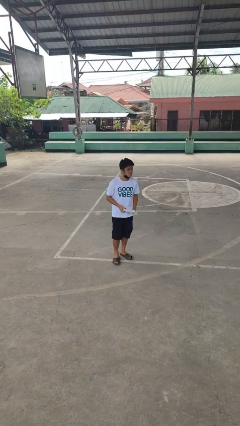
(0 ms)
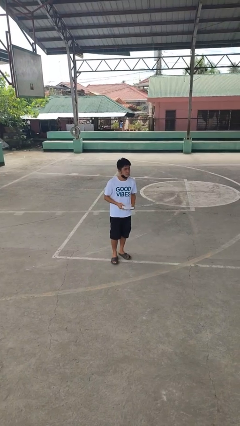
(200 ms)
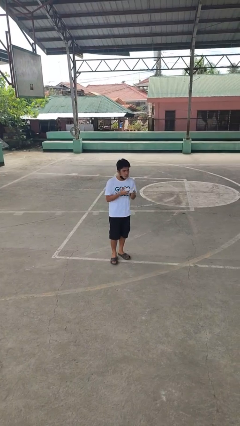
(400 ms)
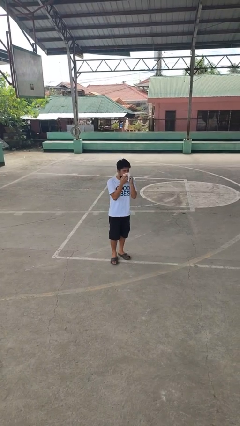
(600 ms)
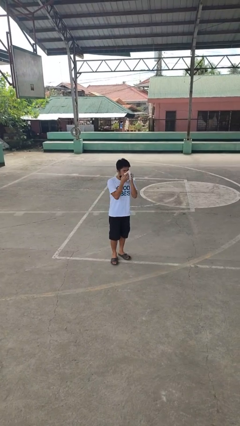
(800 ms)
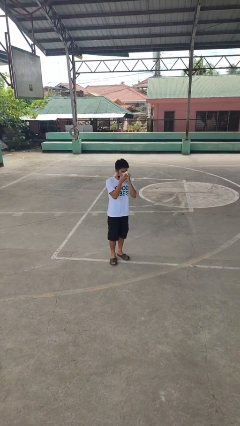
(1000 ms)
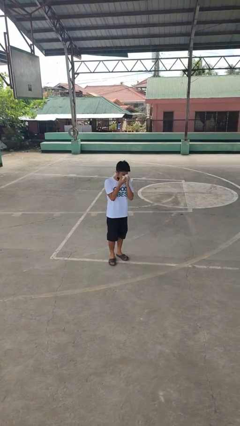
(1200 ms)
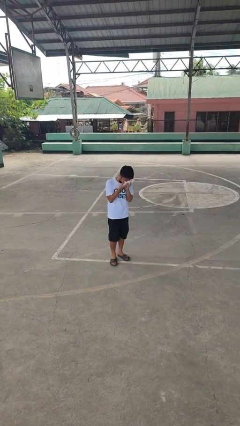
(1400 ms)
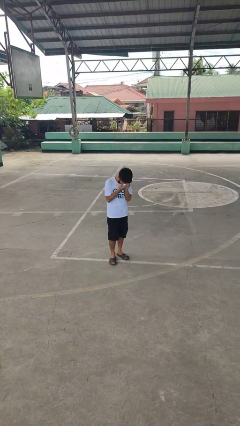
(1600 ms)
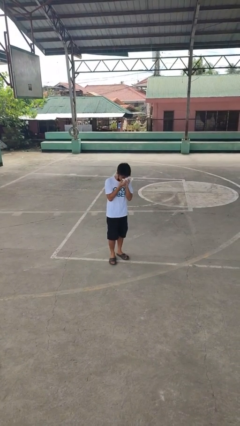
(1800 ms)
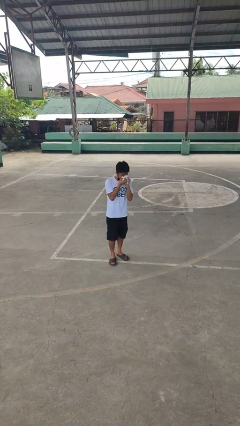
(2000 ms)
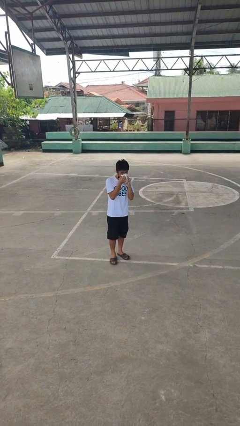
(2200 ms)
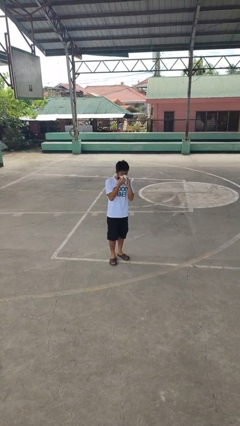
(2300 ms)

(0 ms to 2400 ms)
person blows nose

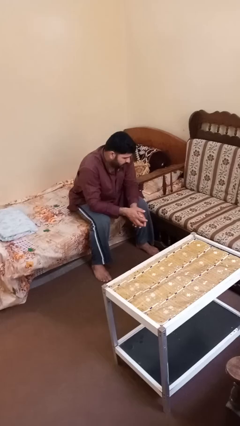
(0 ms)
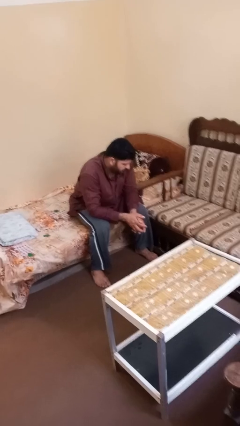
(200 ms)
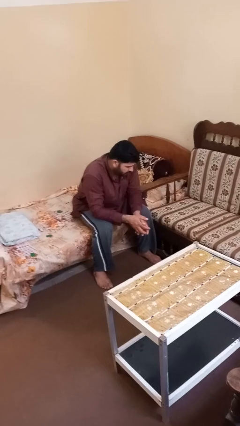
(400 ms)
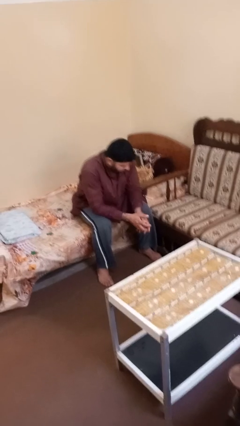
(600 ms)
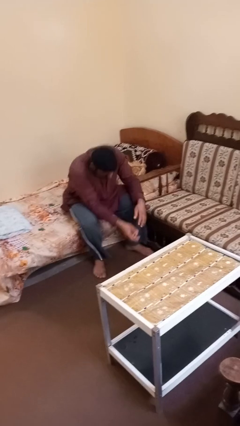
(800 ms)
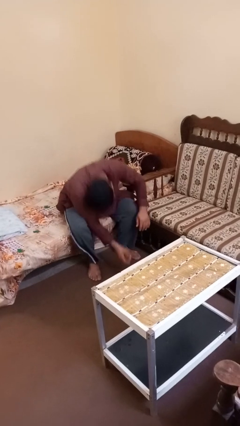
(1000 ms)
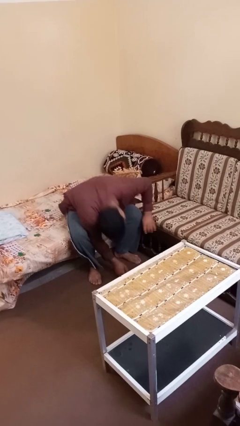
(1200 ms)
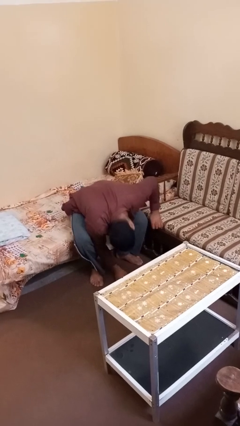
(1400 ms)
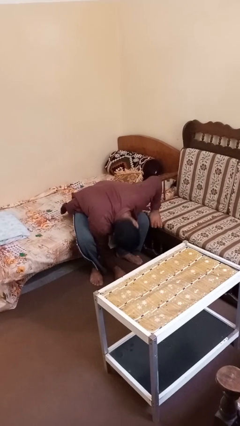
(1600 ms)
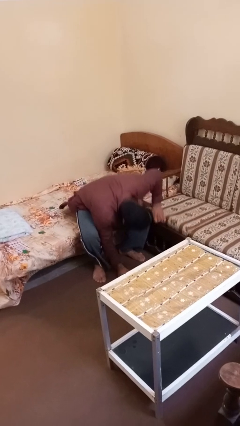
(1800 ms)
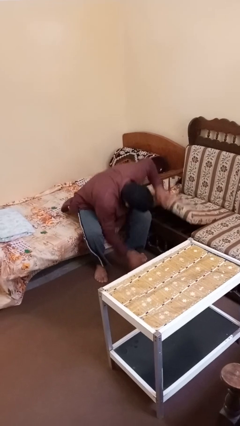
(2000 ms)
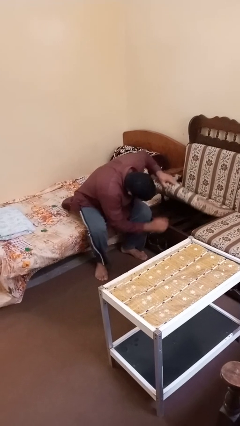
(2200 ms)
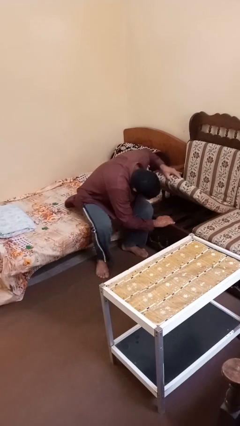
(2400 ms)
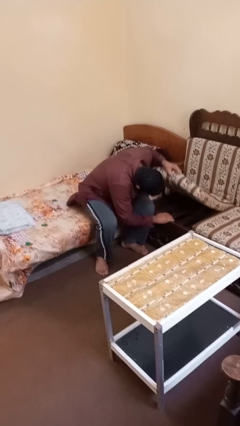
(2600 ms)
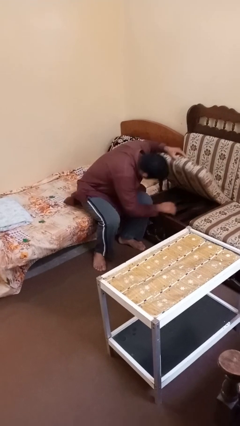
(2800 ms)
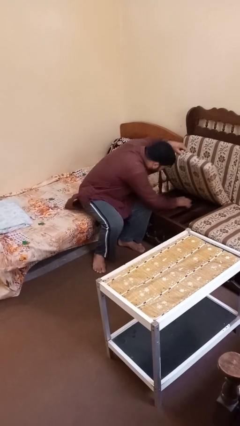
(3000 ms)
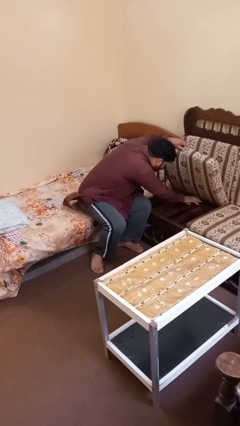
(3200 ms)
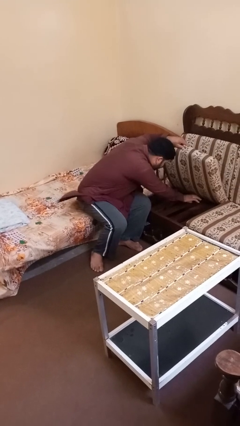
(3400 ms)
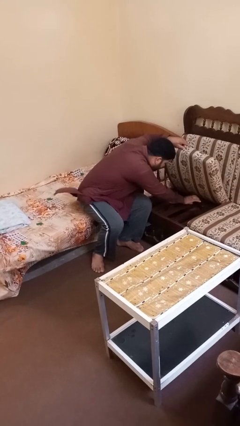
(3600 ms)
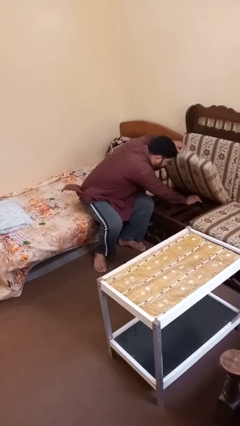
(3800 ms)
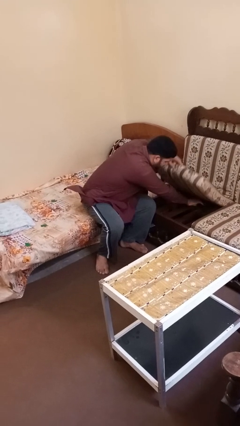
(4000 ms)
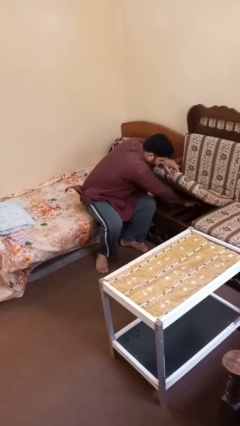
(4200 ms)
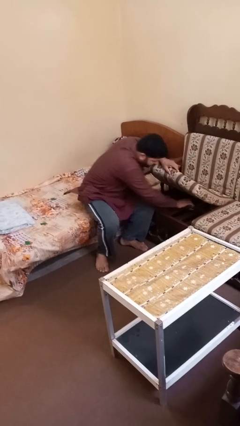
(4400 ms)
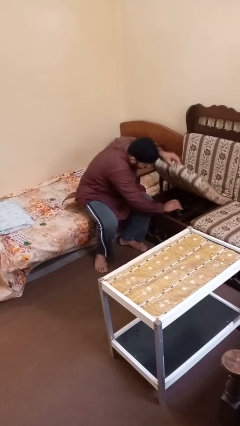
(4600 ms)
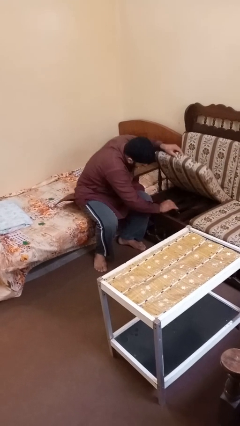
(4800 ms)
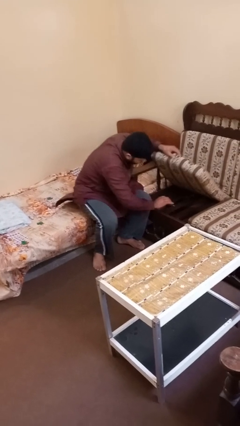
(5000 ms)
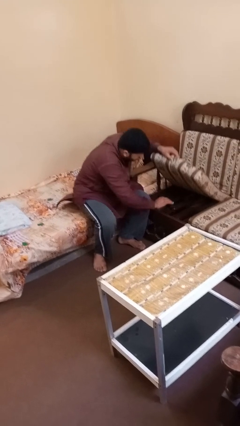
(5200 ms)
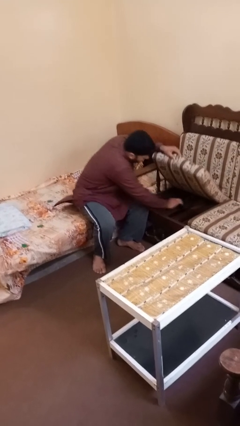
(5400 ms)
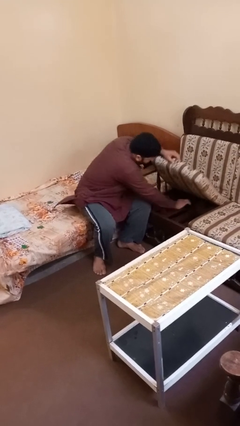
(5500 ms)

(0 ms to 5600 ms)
person searches under couch

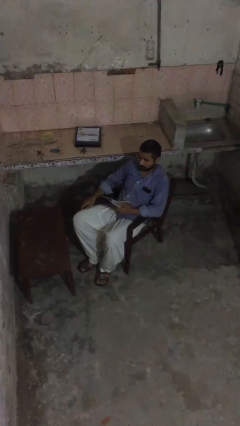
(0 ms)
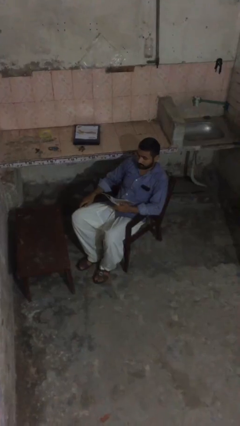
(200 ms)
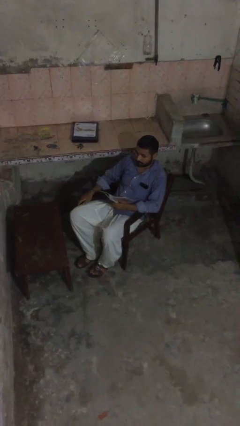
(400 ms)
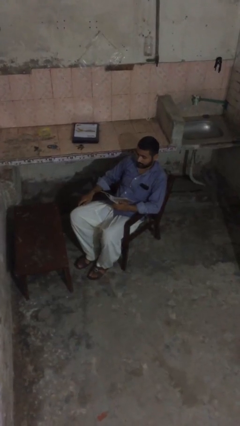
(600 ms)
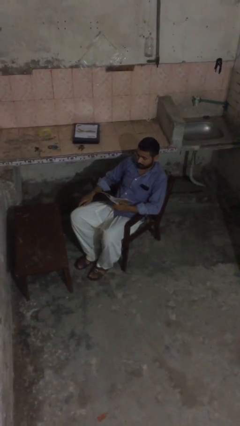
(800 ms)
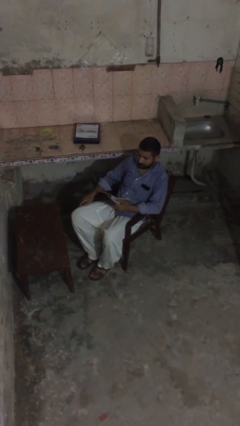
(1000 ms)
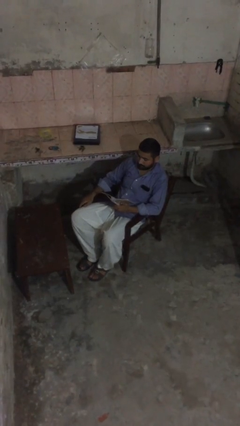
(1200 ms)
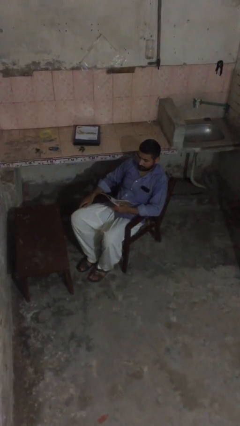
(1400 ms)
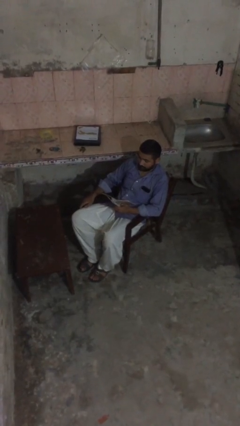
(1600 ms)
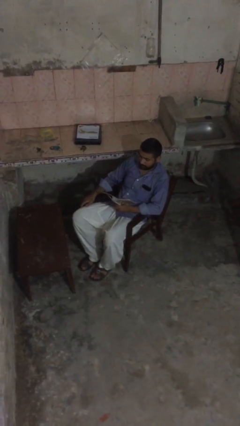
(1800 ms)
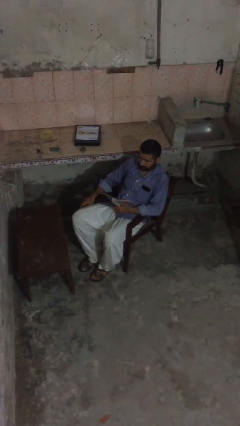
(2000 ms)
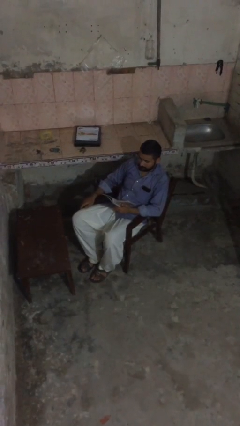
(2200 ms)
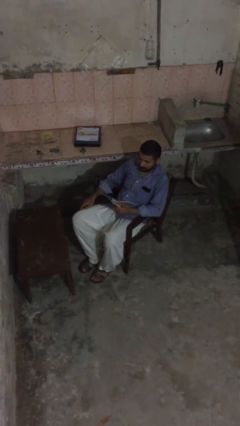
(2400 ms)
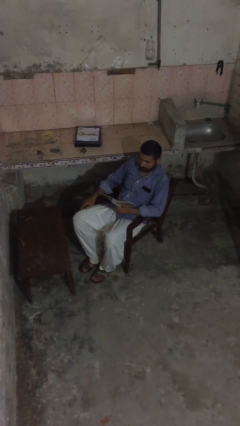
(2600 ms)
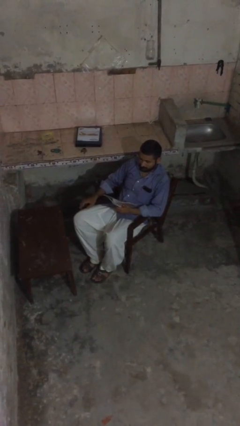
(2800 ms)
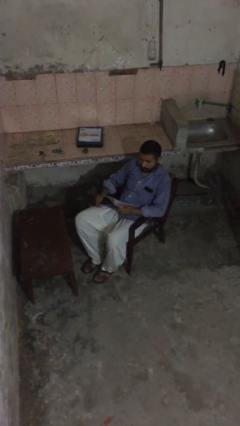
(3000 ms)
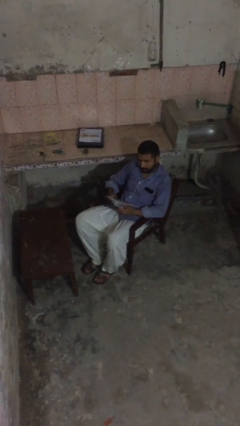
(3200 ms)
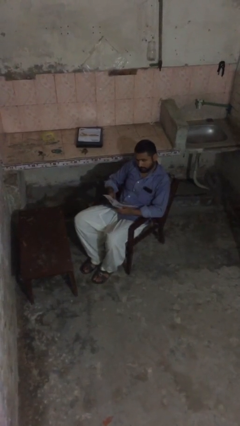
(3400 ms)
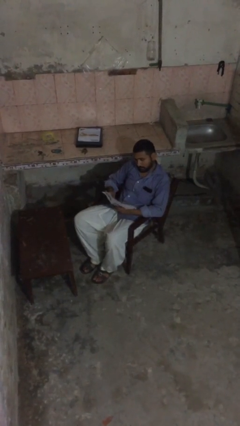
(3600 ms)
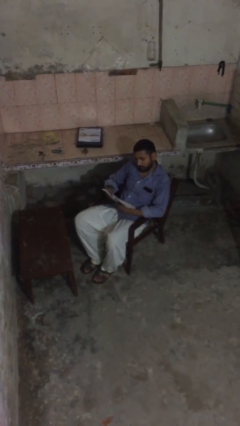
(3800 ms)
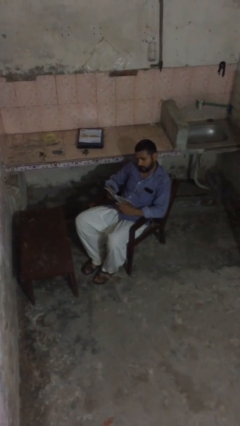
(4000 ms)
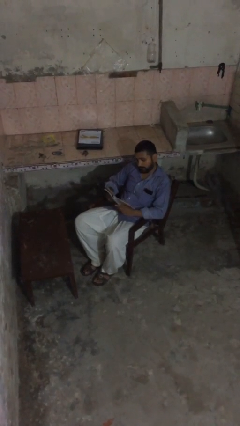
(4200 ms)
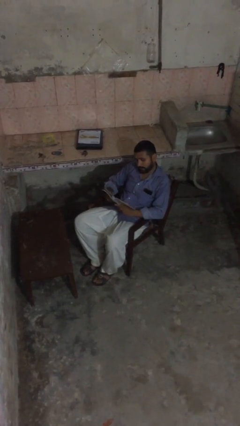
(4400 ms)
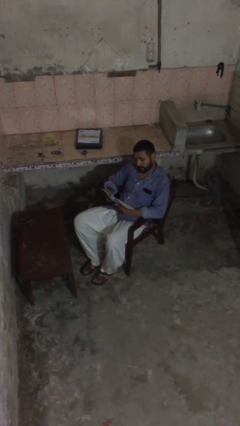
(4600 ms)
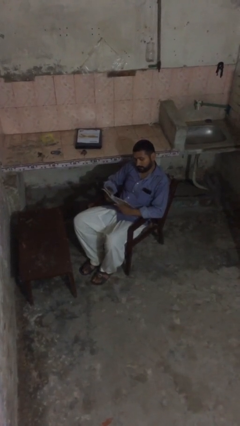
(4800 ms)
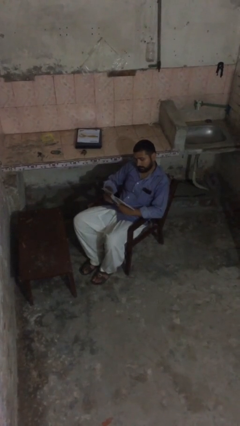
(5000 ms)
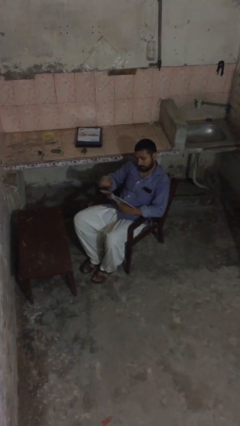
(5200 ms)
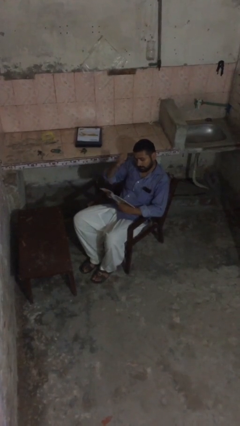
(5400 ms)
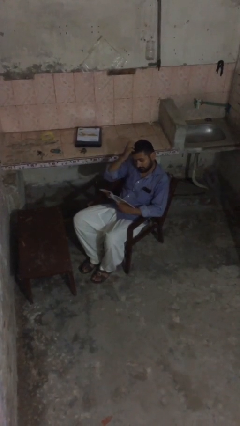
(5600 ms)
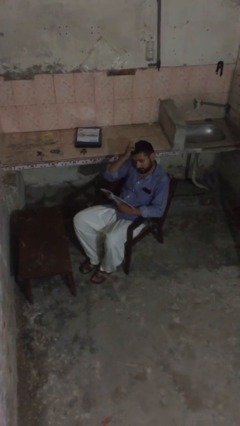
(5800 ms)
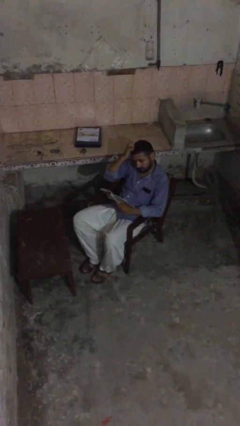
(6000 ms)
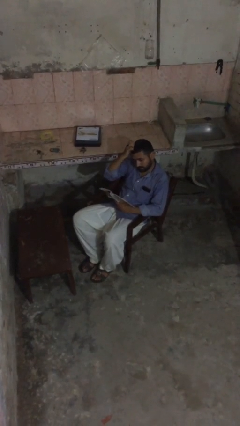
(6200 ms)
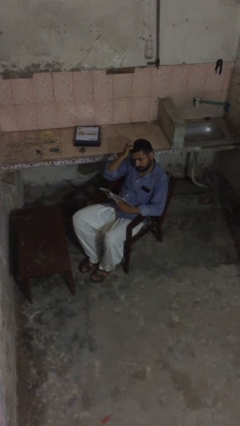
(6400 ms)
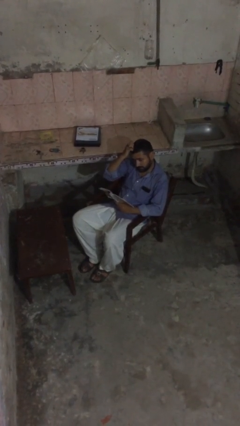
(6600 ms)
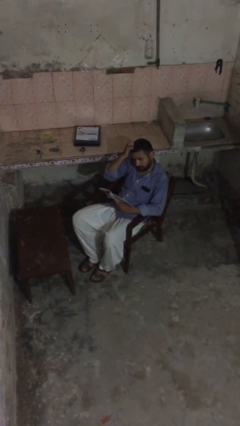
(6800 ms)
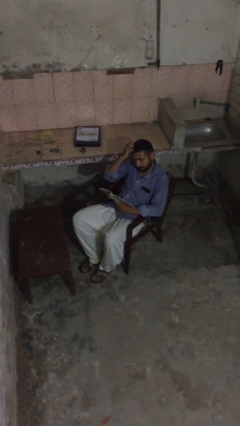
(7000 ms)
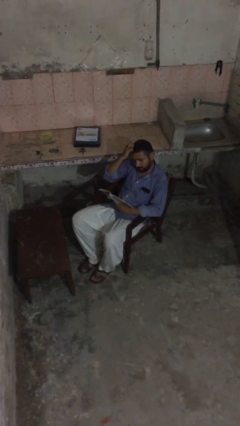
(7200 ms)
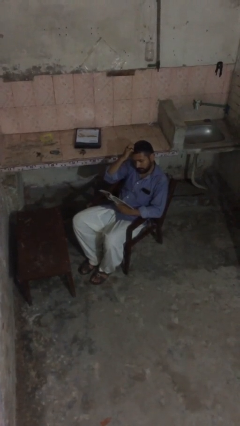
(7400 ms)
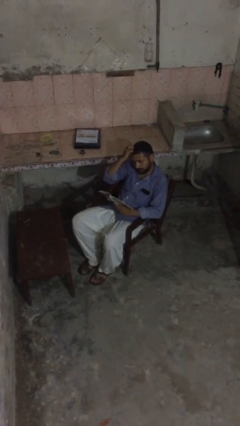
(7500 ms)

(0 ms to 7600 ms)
person reads document

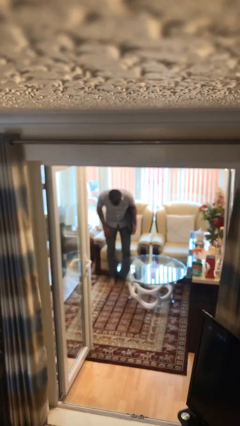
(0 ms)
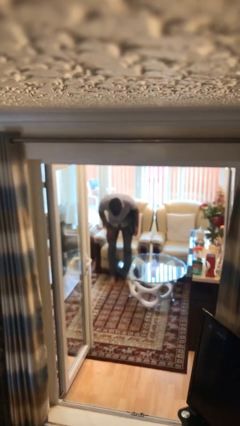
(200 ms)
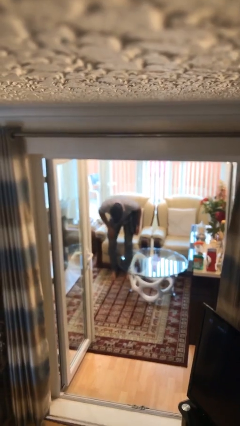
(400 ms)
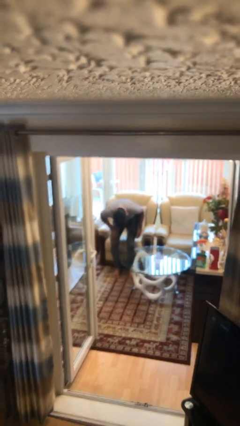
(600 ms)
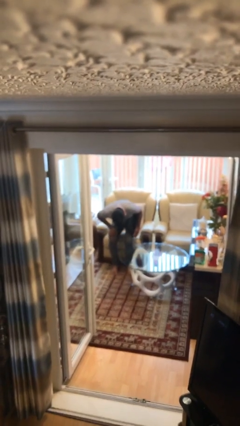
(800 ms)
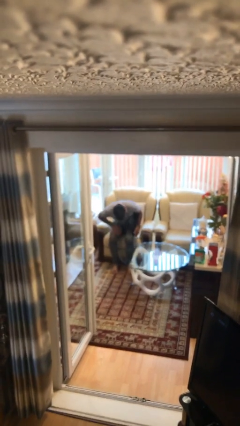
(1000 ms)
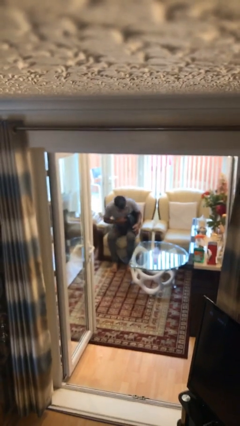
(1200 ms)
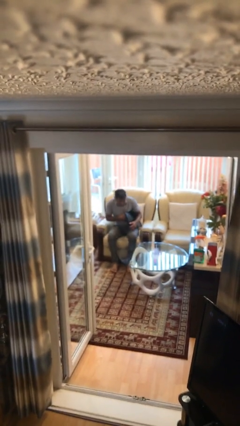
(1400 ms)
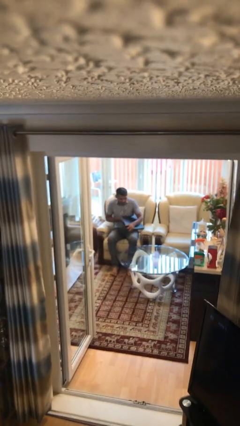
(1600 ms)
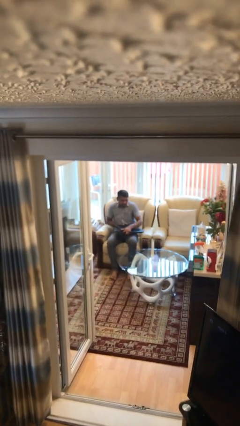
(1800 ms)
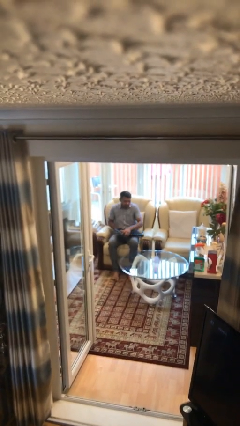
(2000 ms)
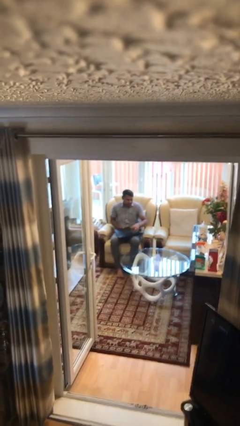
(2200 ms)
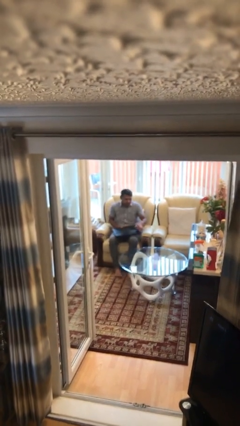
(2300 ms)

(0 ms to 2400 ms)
person sits down
